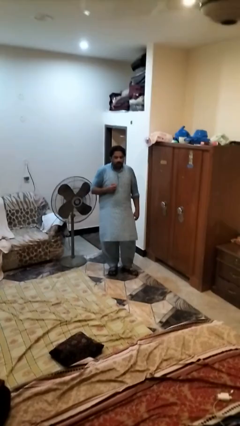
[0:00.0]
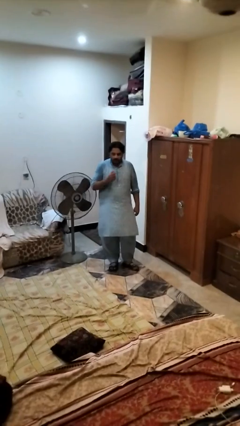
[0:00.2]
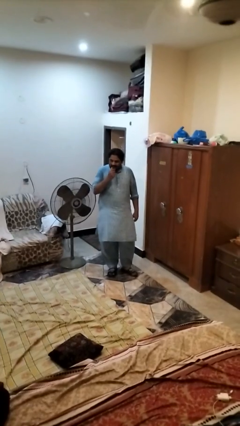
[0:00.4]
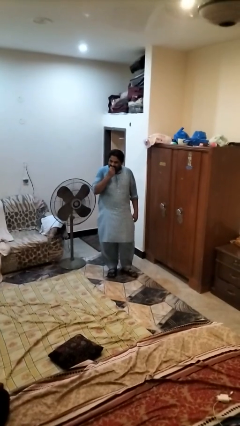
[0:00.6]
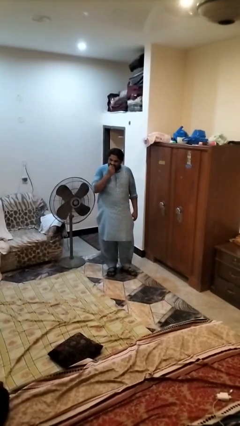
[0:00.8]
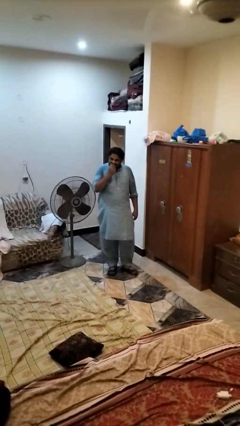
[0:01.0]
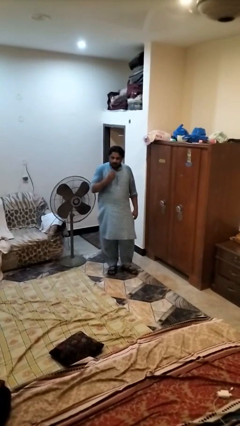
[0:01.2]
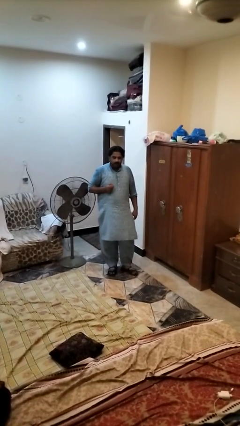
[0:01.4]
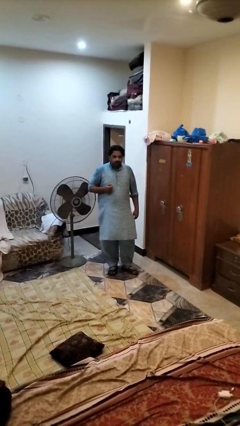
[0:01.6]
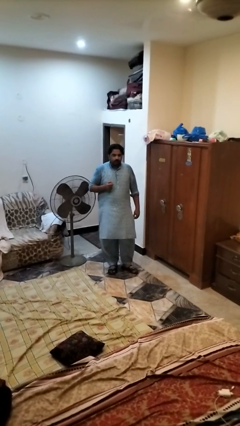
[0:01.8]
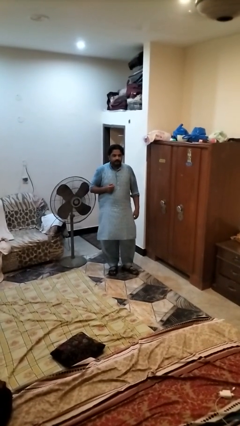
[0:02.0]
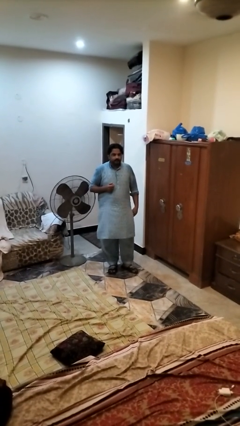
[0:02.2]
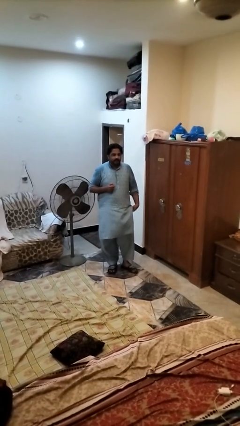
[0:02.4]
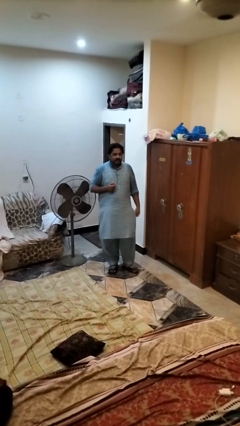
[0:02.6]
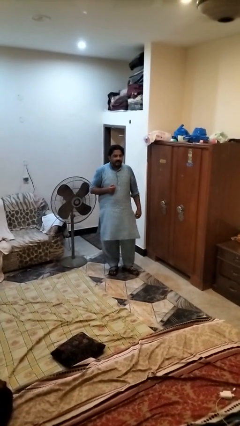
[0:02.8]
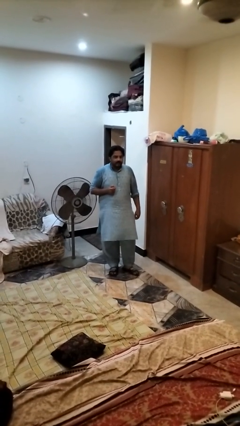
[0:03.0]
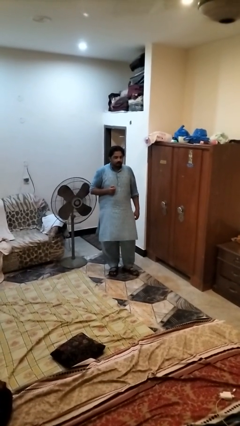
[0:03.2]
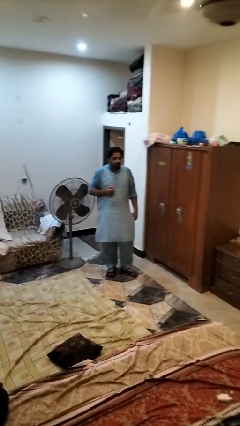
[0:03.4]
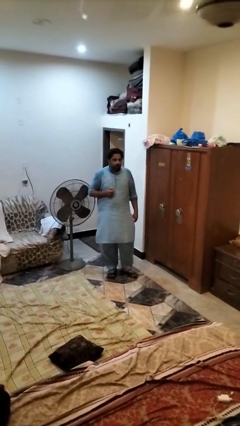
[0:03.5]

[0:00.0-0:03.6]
person eats apple

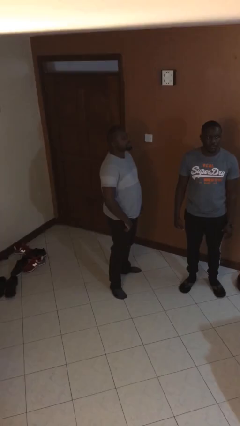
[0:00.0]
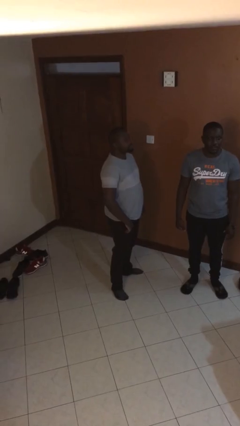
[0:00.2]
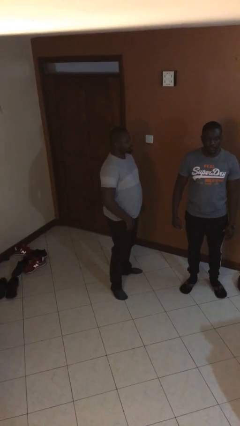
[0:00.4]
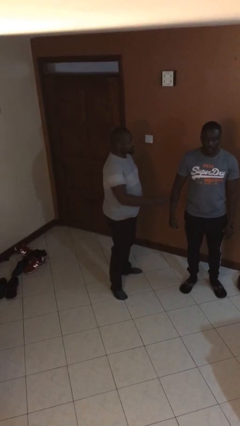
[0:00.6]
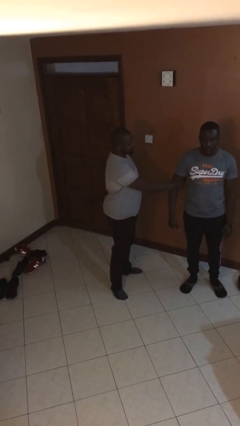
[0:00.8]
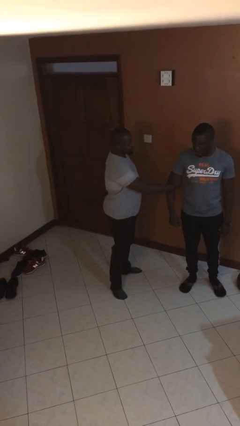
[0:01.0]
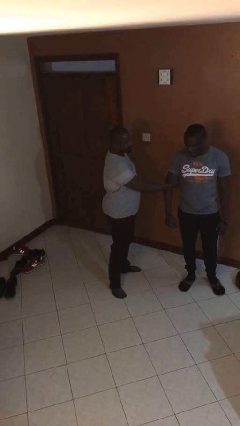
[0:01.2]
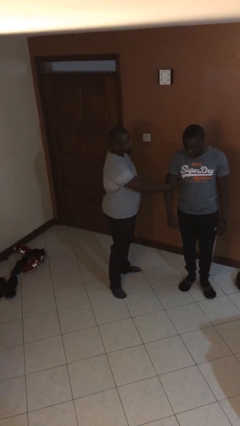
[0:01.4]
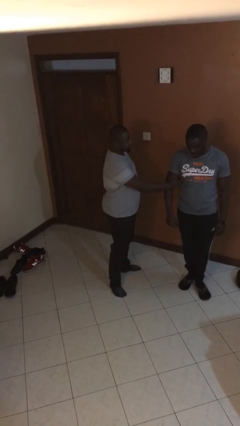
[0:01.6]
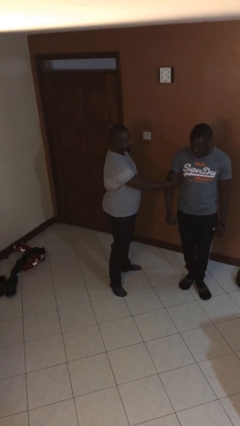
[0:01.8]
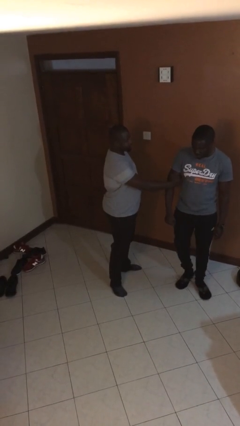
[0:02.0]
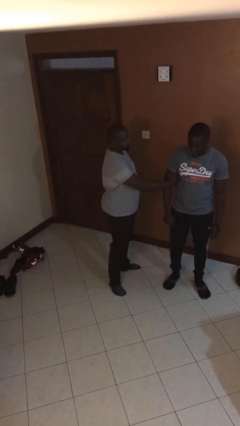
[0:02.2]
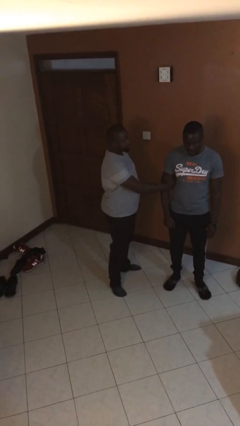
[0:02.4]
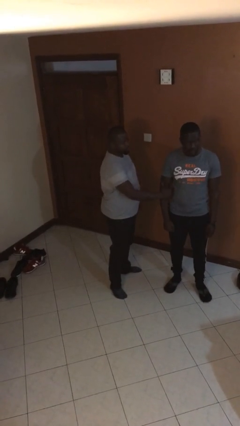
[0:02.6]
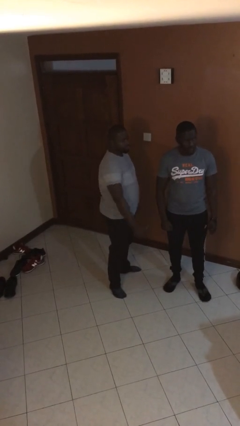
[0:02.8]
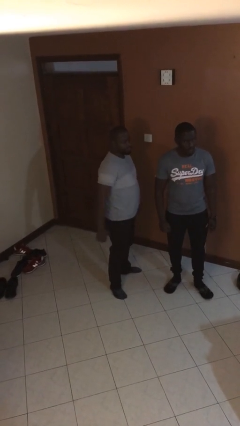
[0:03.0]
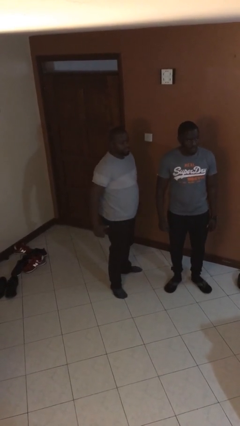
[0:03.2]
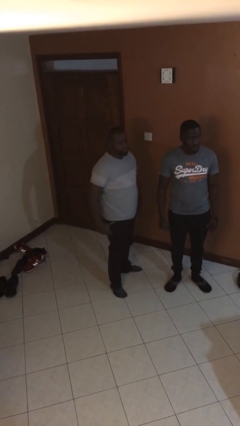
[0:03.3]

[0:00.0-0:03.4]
person grabs person by bicep

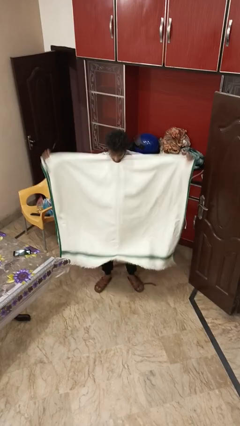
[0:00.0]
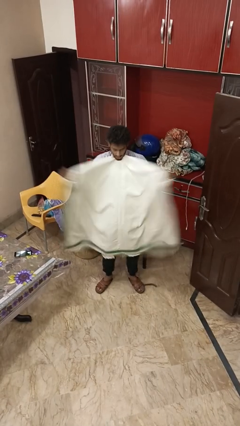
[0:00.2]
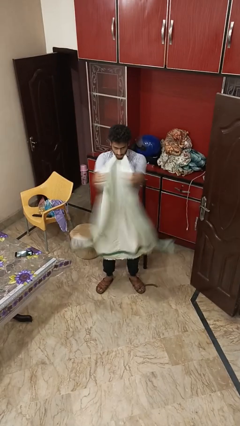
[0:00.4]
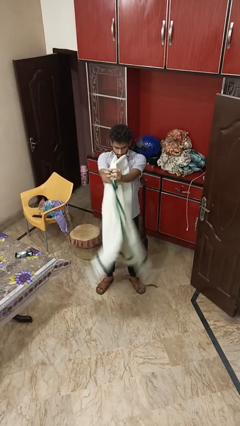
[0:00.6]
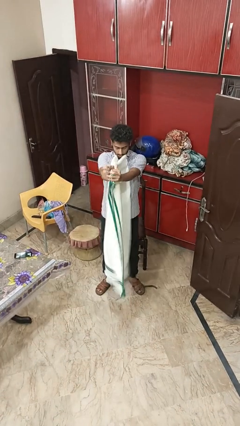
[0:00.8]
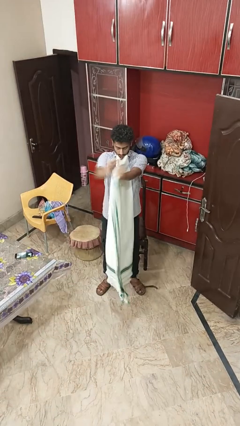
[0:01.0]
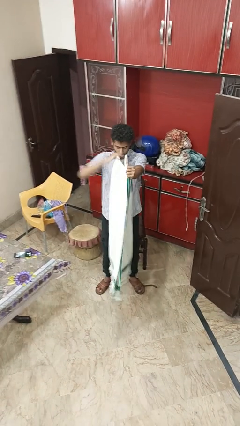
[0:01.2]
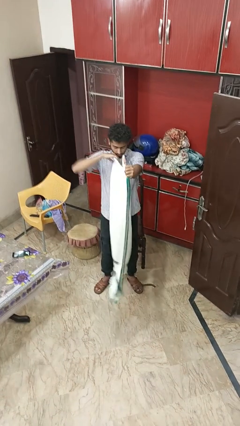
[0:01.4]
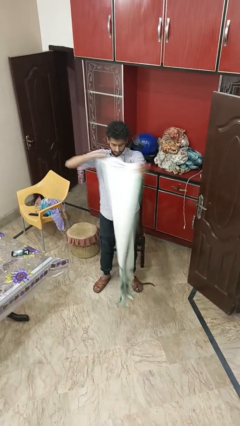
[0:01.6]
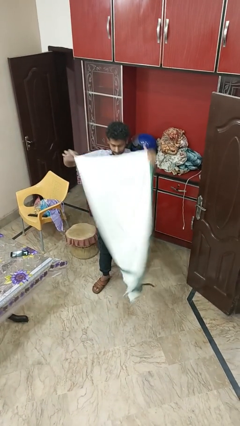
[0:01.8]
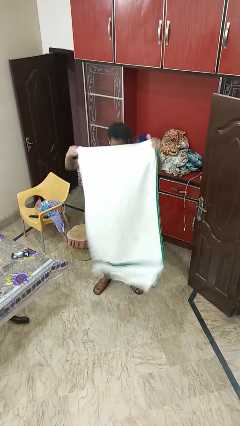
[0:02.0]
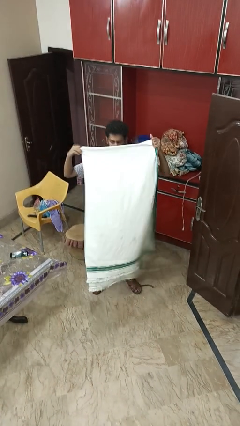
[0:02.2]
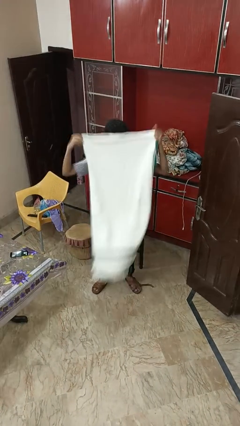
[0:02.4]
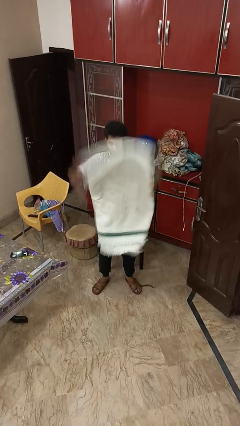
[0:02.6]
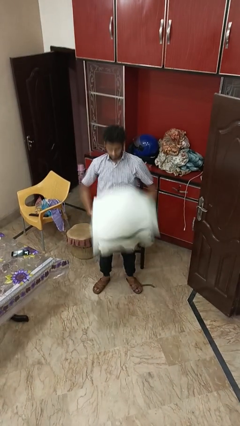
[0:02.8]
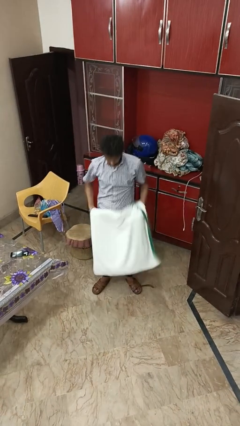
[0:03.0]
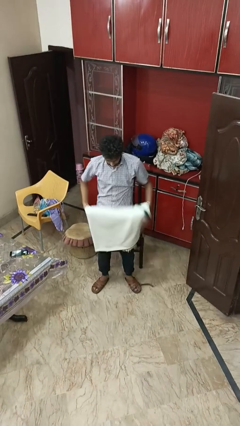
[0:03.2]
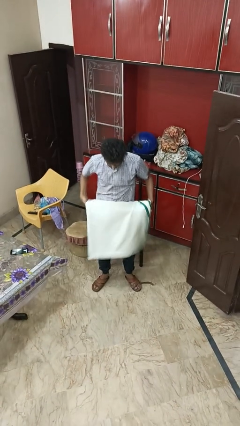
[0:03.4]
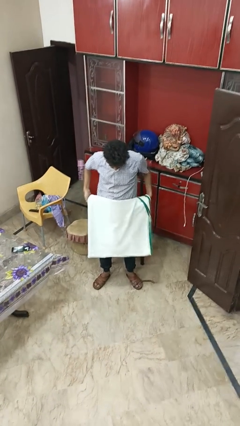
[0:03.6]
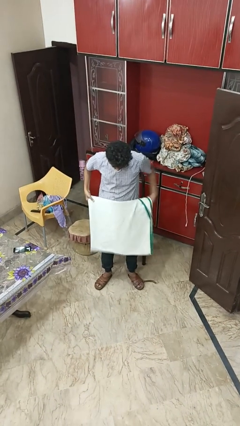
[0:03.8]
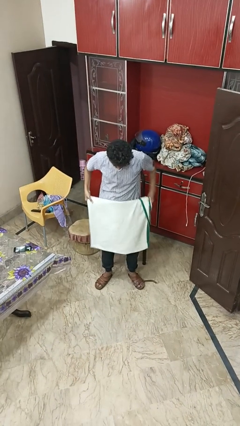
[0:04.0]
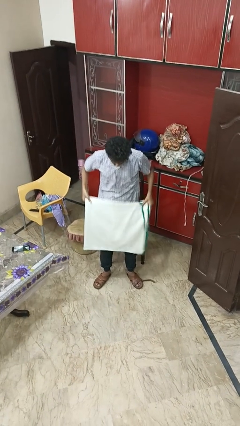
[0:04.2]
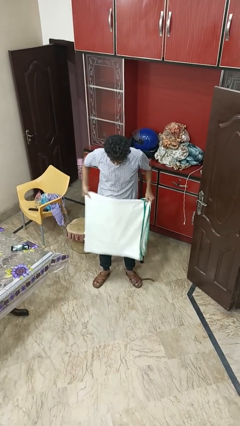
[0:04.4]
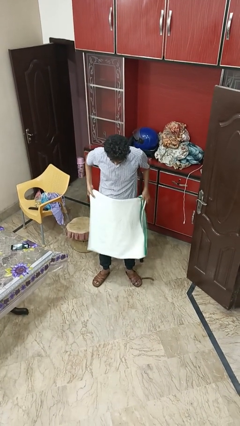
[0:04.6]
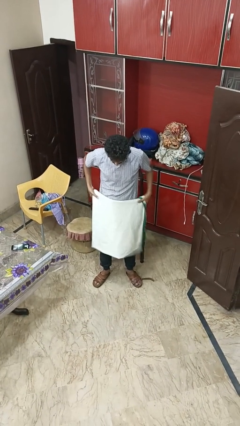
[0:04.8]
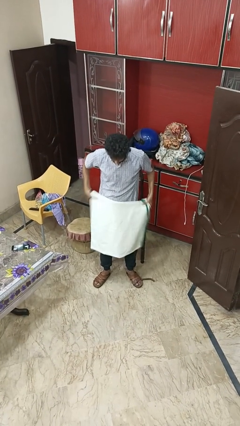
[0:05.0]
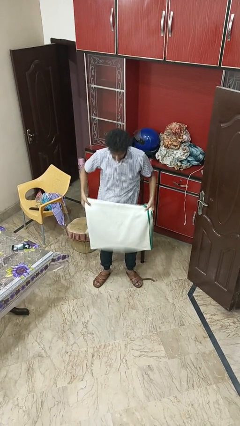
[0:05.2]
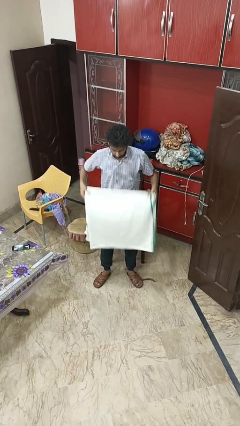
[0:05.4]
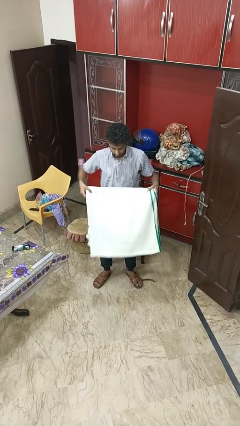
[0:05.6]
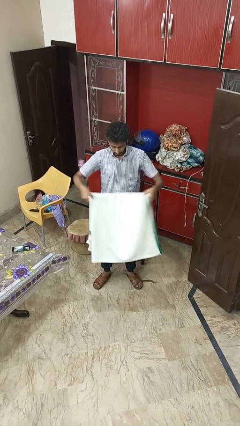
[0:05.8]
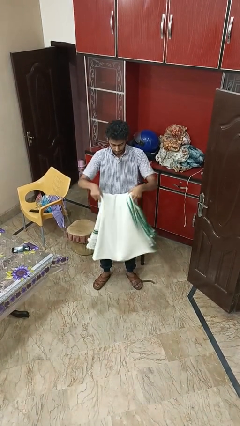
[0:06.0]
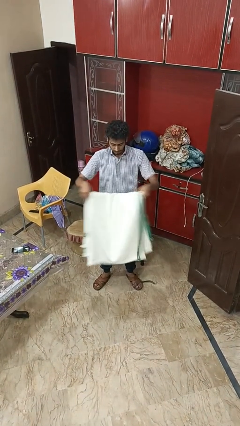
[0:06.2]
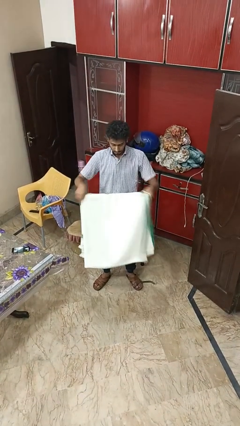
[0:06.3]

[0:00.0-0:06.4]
person folds blanket

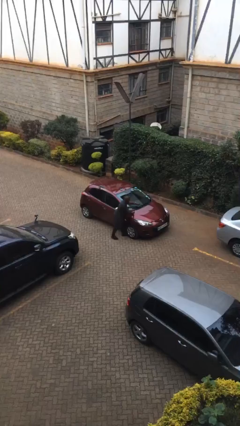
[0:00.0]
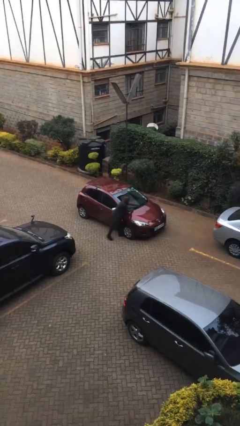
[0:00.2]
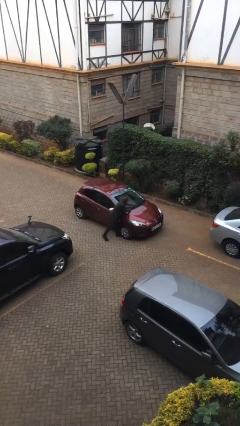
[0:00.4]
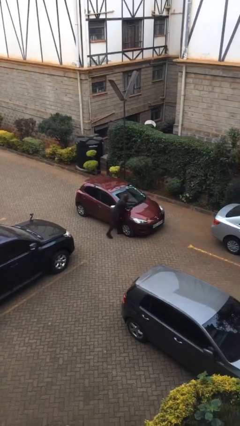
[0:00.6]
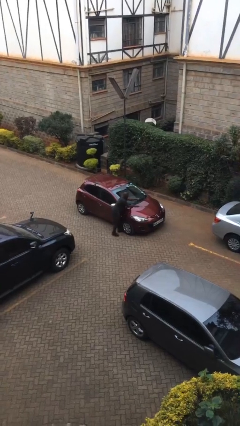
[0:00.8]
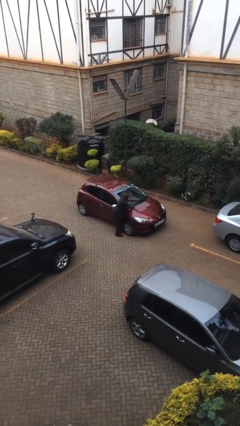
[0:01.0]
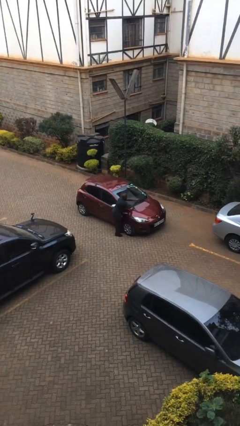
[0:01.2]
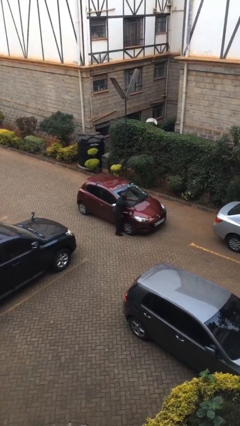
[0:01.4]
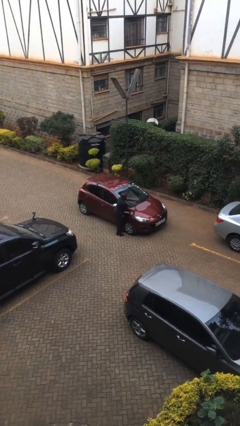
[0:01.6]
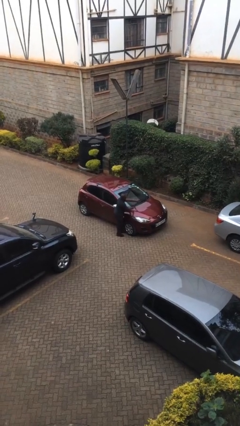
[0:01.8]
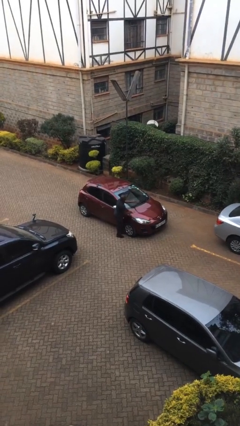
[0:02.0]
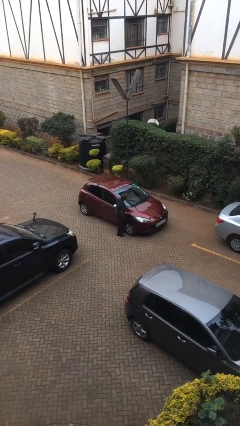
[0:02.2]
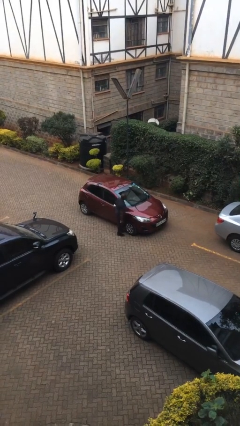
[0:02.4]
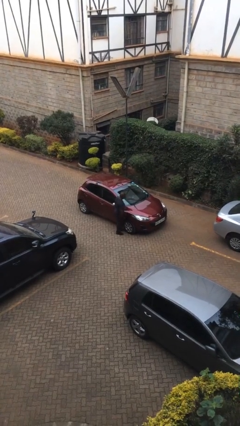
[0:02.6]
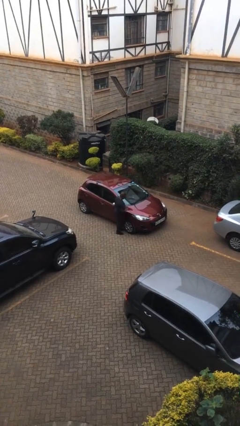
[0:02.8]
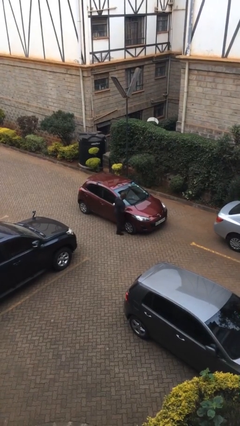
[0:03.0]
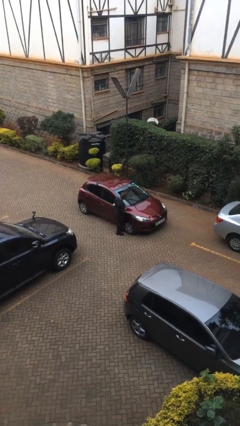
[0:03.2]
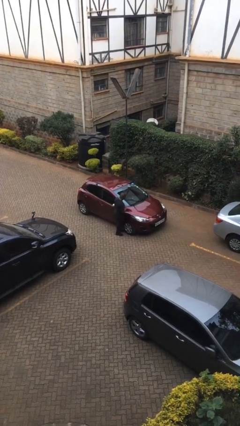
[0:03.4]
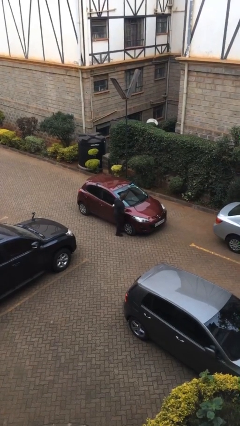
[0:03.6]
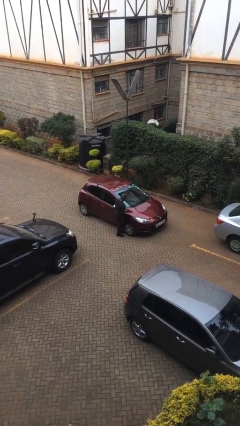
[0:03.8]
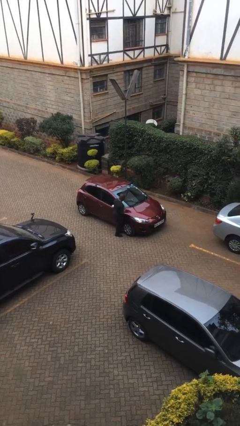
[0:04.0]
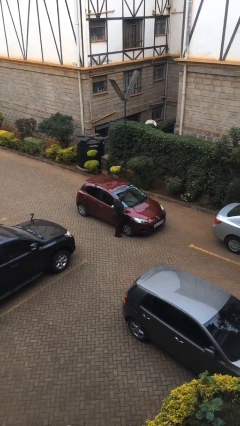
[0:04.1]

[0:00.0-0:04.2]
person flips up car wipers

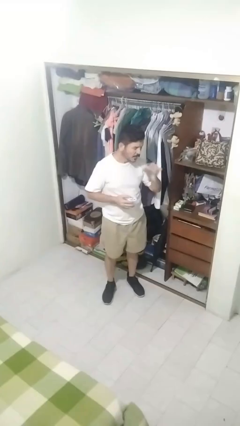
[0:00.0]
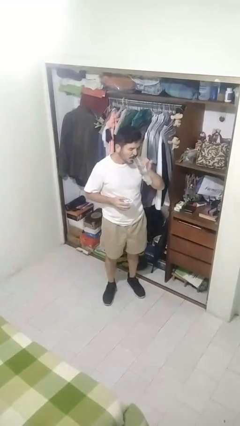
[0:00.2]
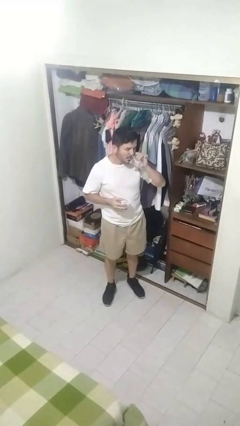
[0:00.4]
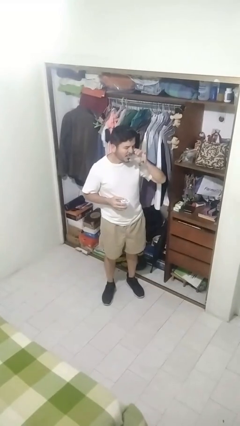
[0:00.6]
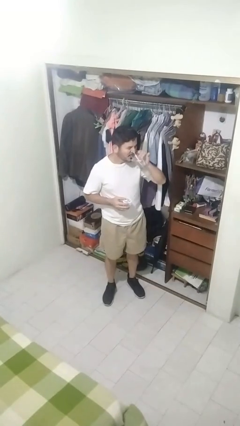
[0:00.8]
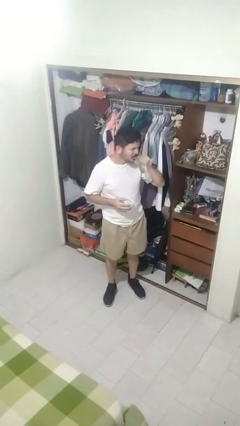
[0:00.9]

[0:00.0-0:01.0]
person drinks from cup
